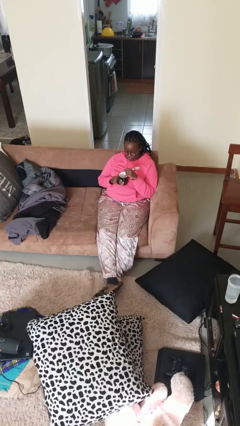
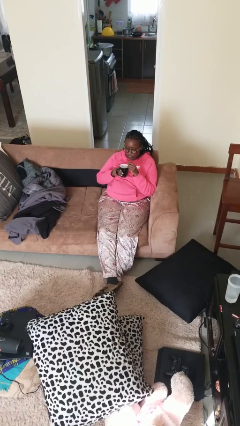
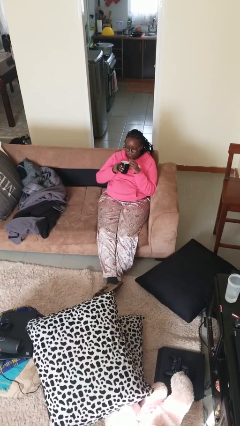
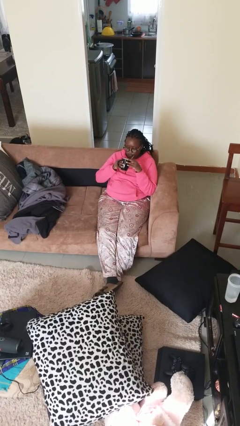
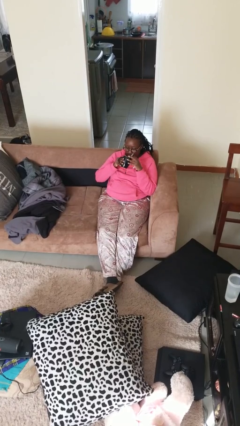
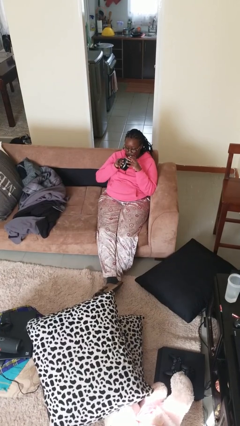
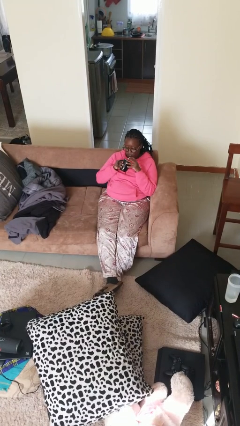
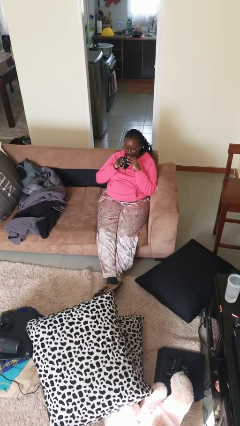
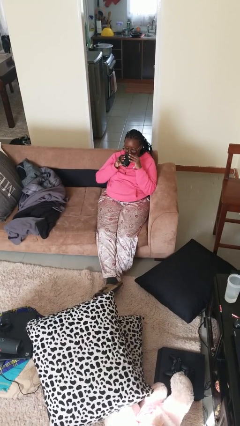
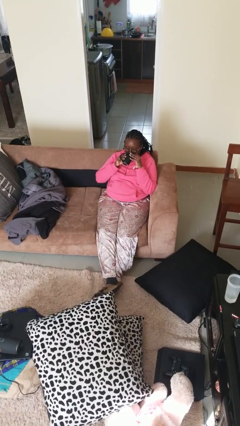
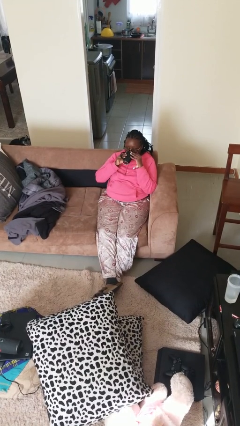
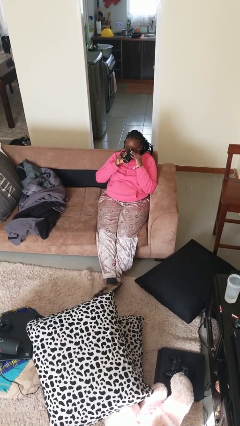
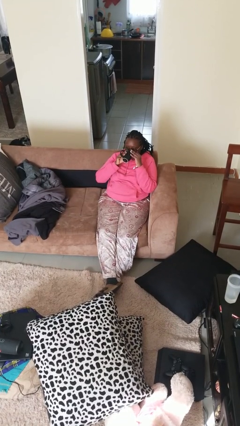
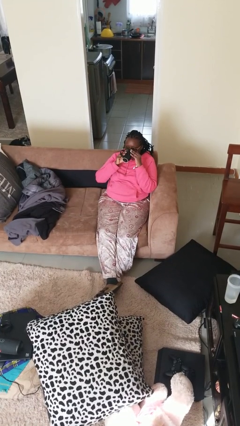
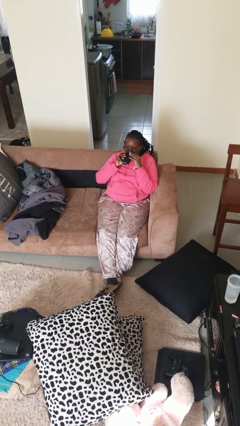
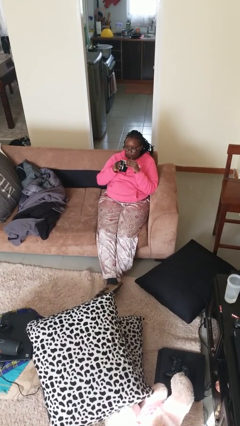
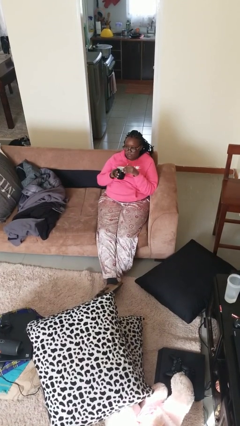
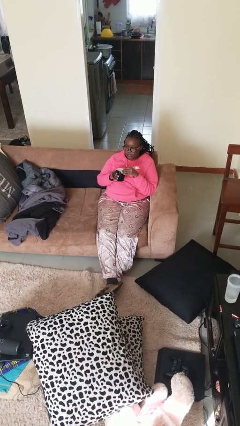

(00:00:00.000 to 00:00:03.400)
person drinks from mug

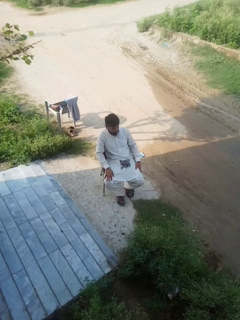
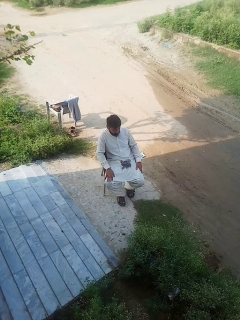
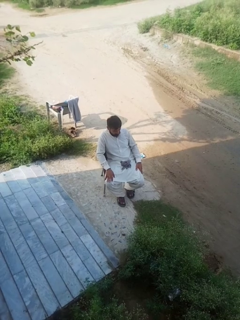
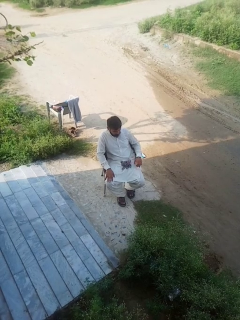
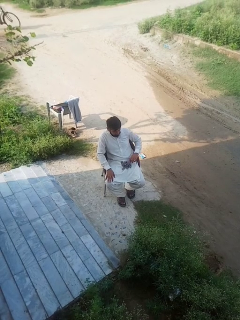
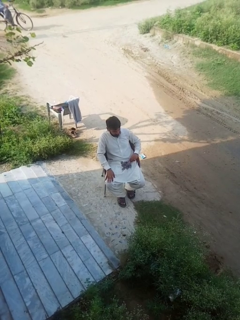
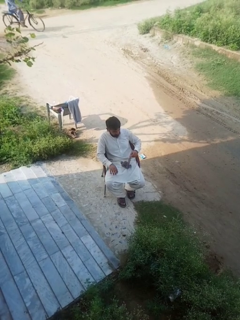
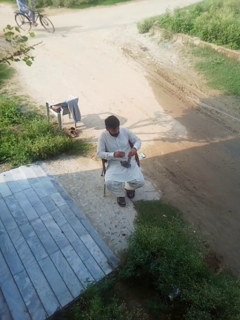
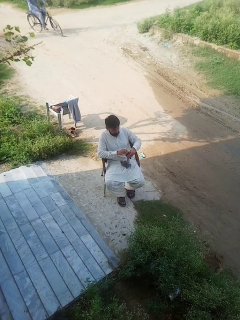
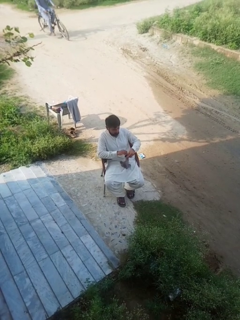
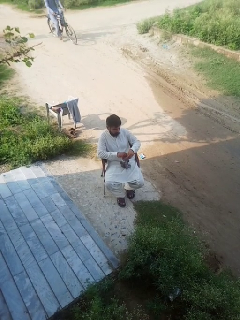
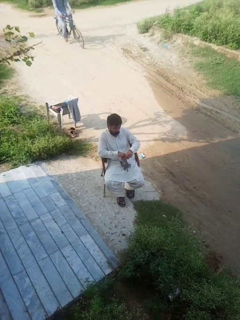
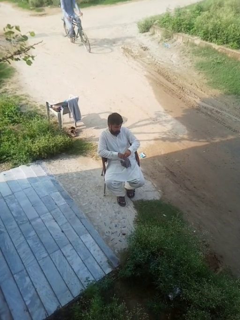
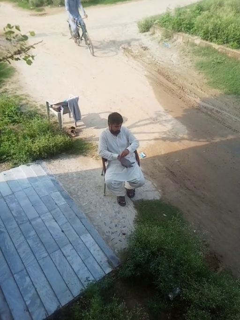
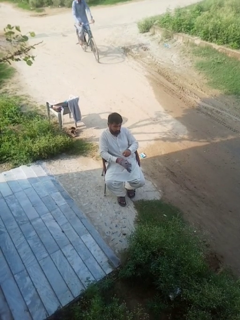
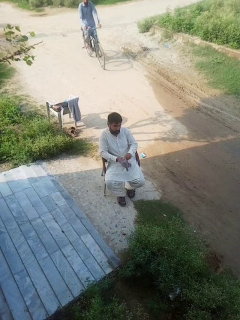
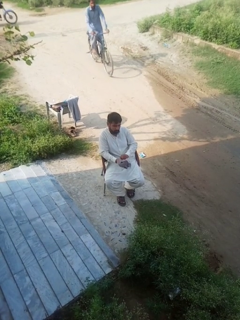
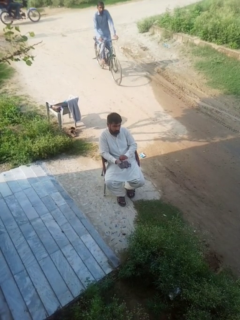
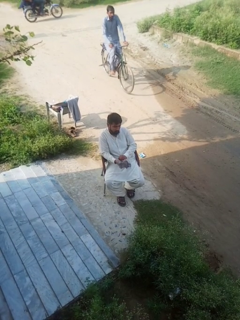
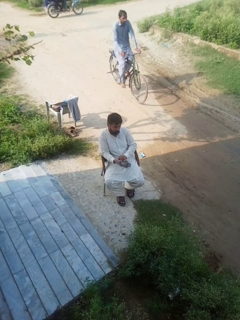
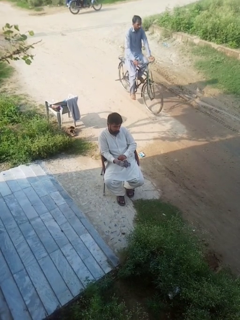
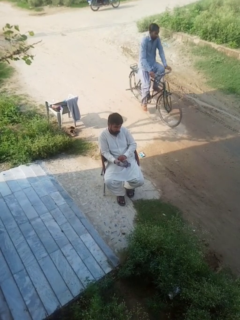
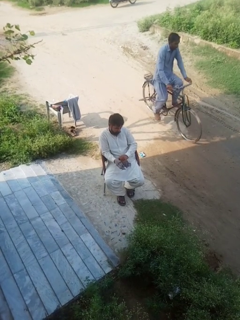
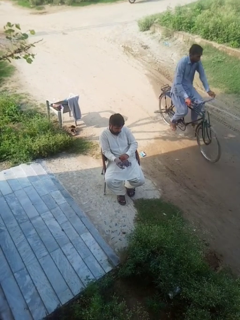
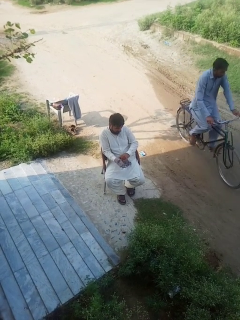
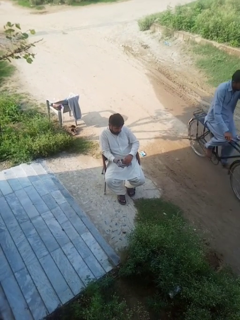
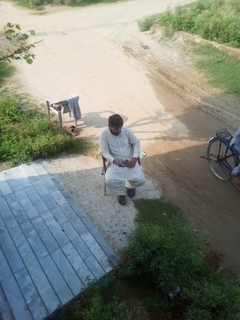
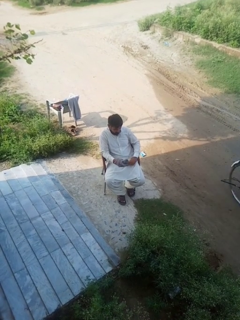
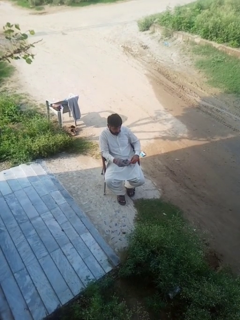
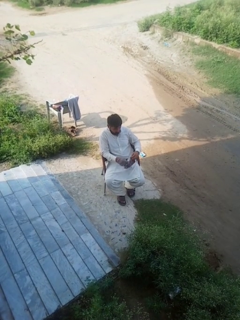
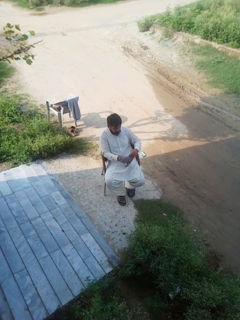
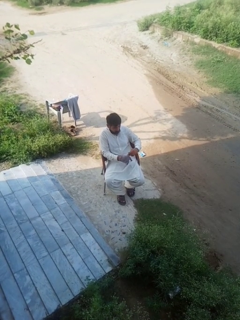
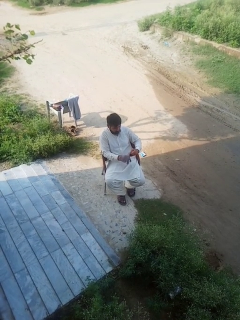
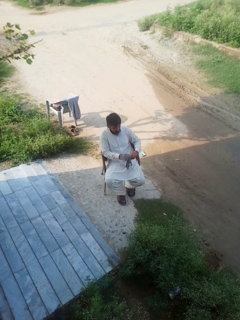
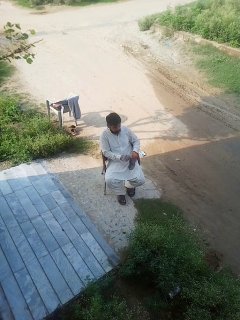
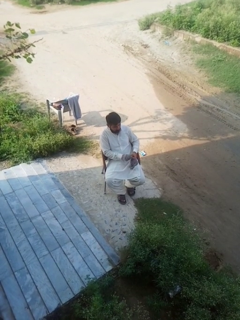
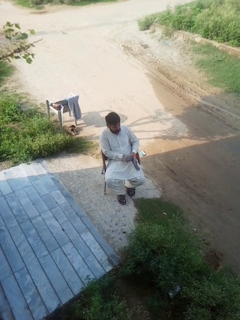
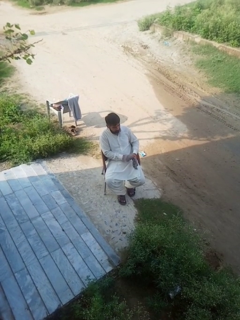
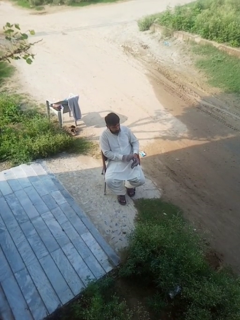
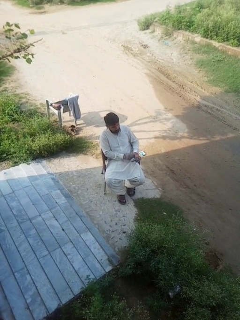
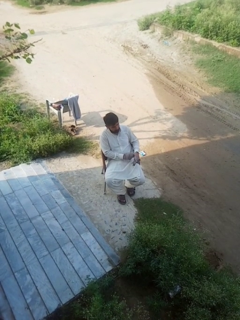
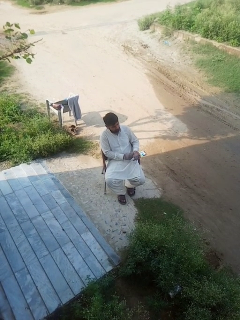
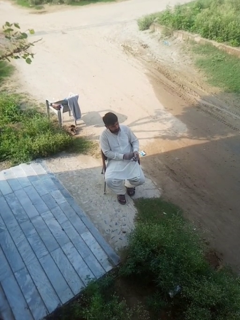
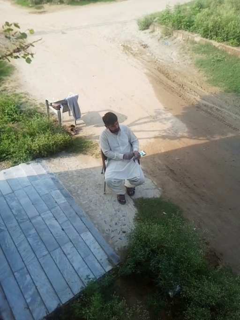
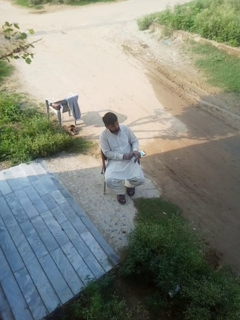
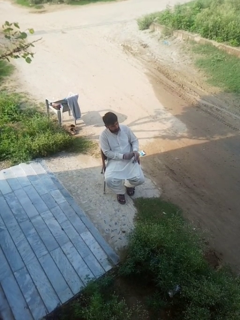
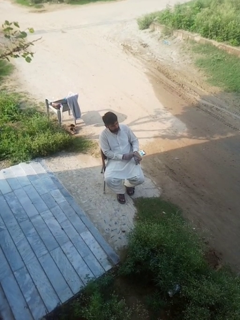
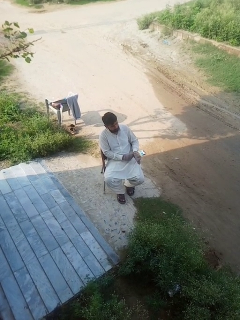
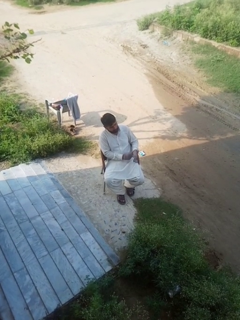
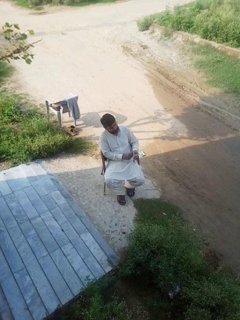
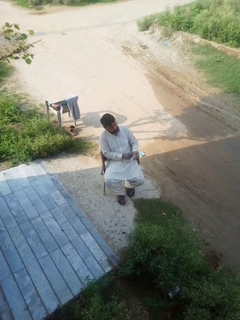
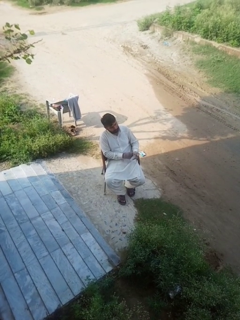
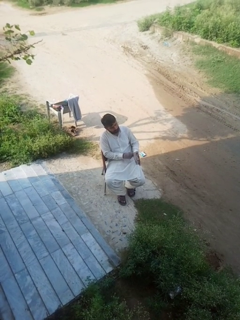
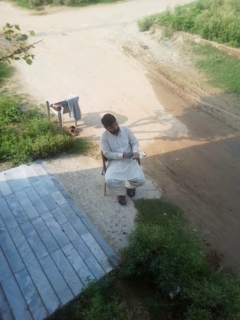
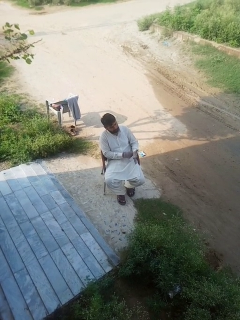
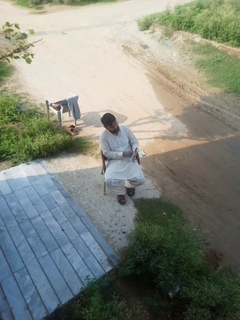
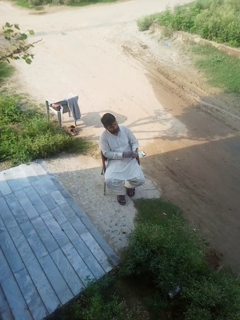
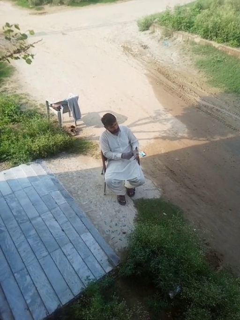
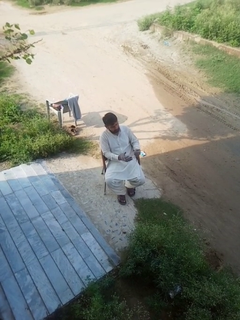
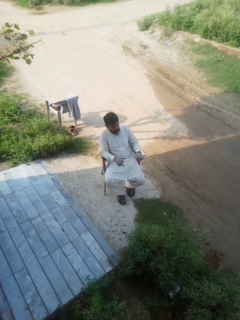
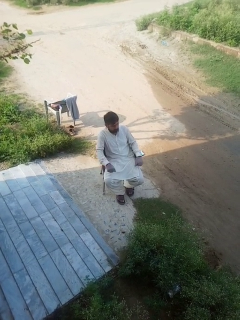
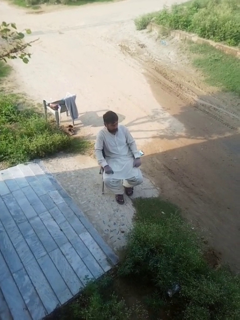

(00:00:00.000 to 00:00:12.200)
person puts on gloves

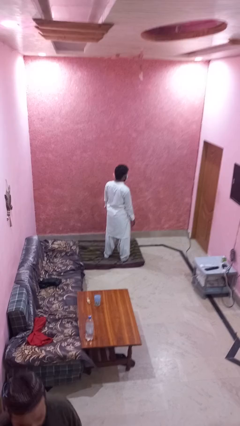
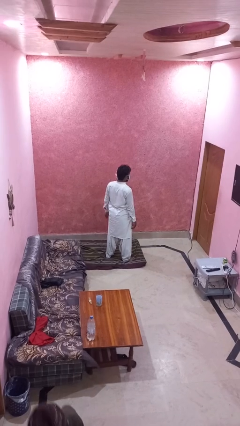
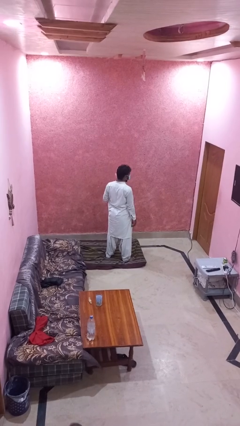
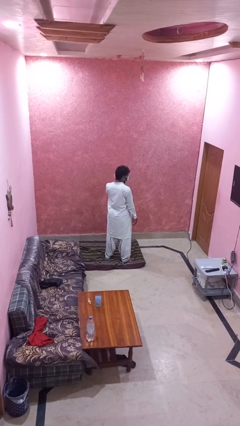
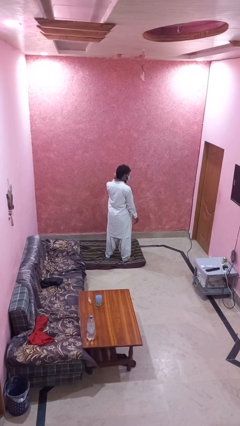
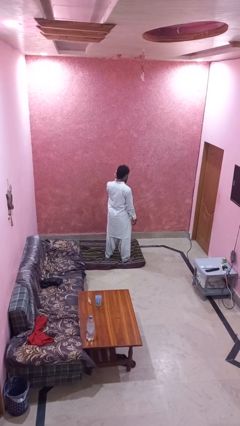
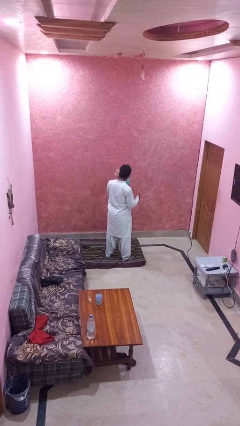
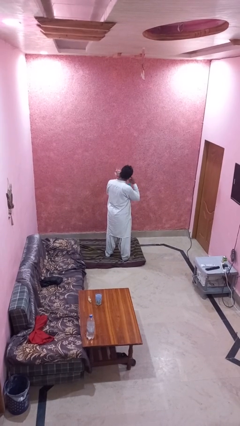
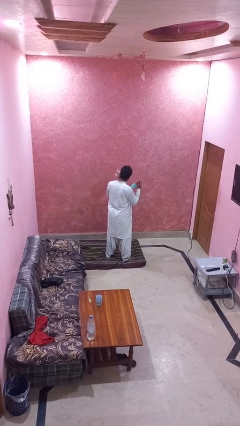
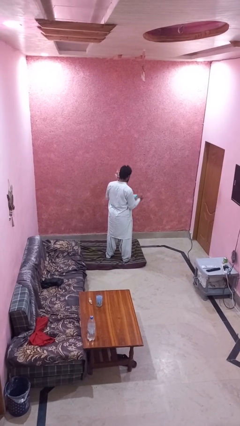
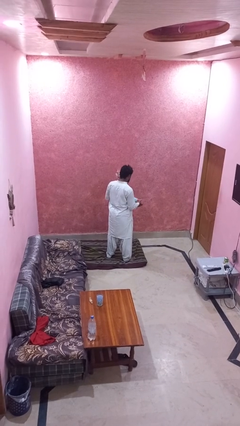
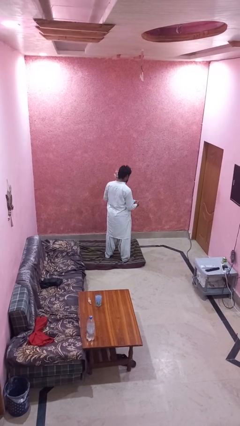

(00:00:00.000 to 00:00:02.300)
person takes off facemask

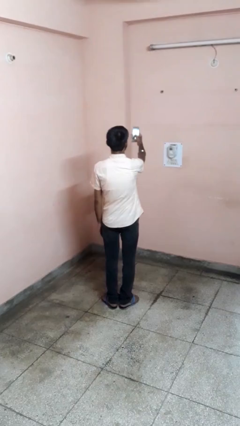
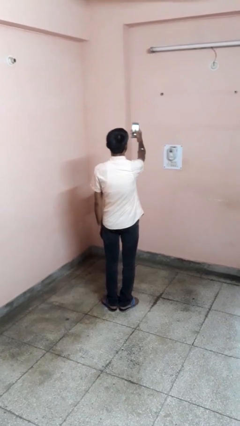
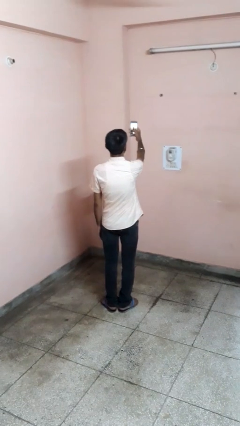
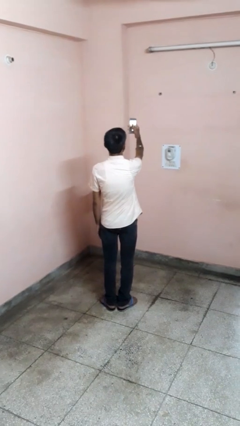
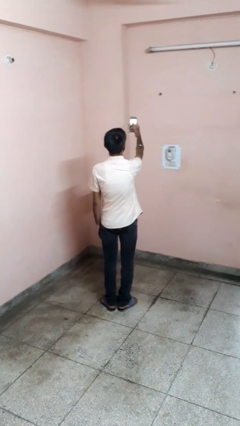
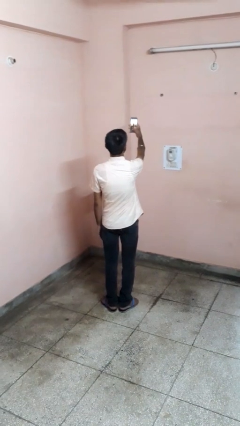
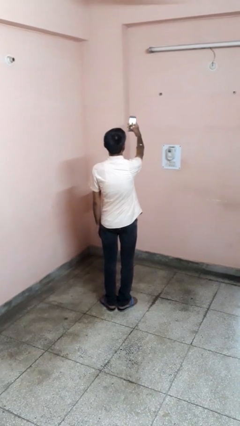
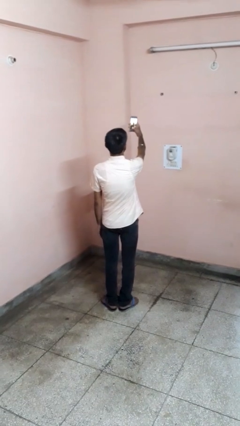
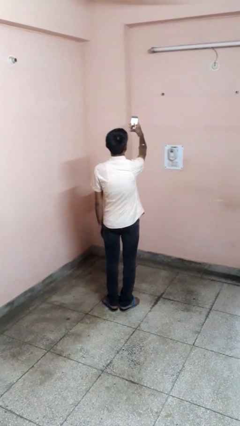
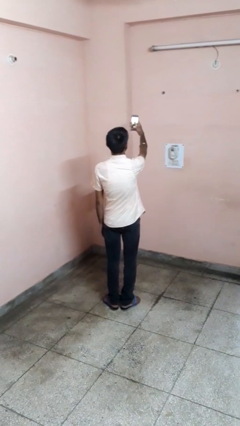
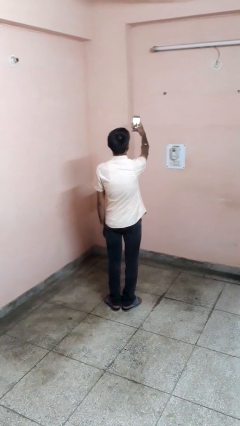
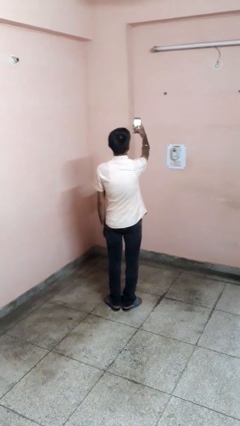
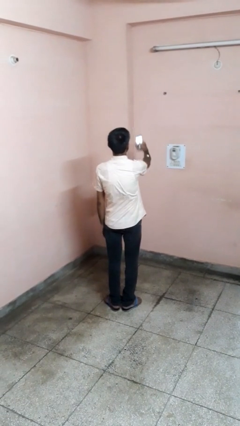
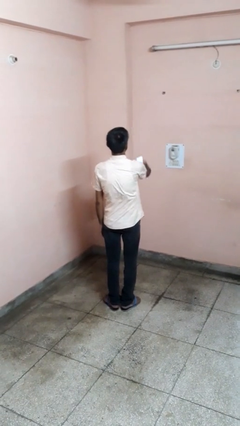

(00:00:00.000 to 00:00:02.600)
person takes selfie
